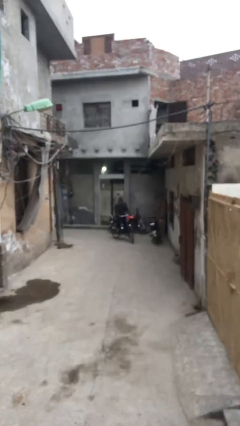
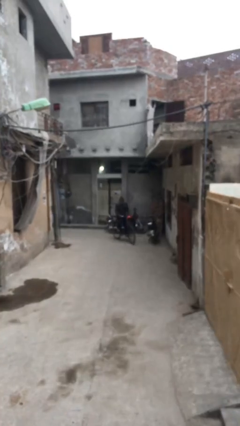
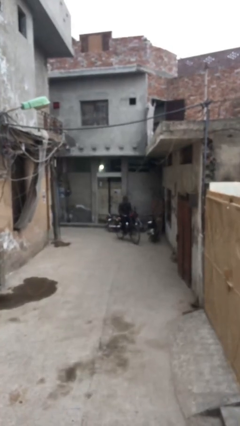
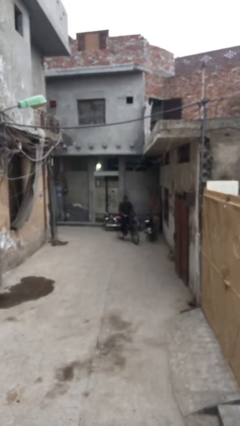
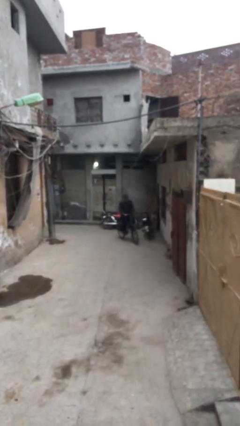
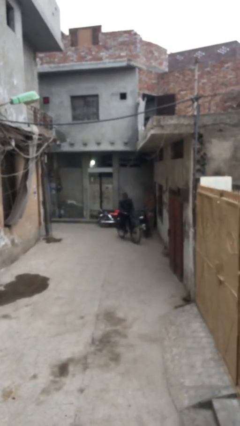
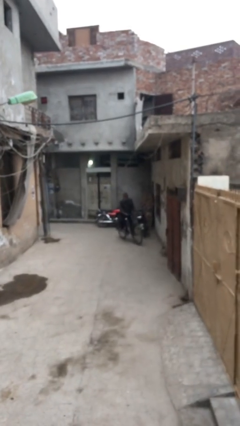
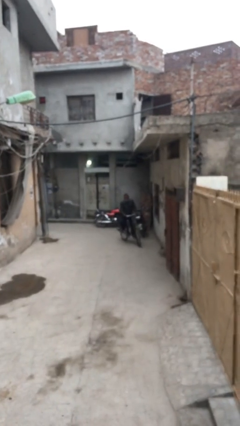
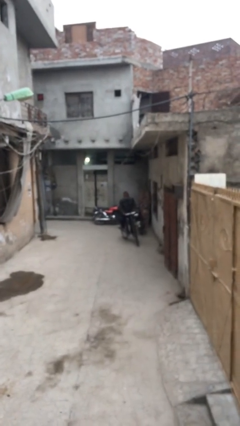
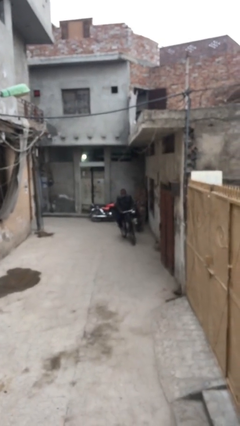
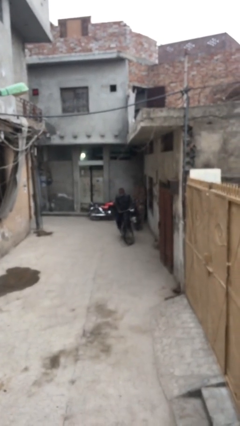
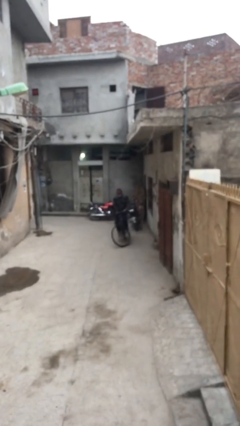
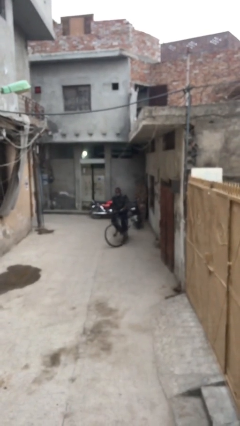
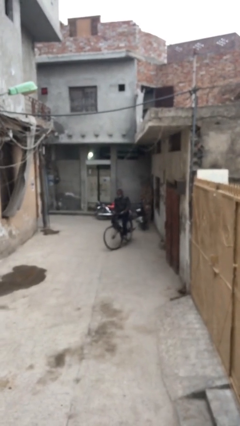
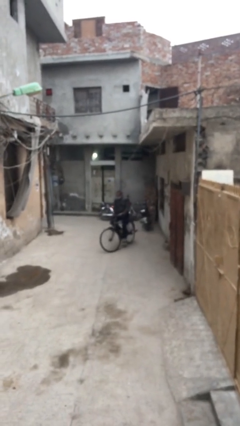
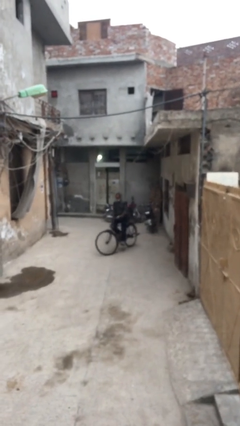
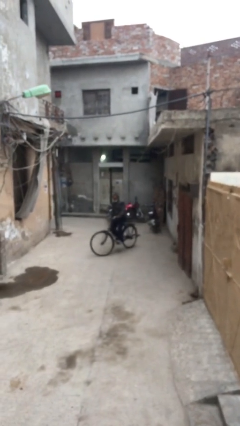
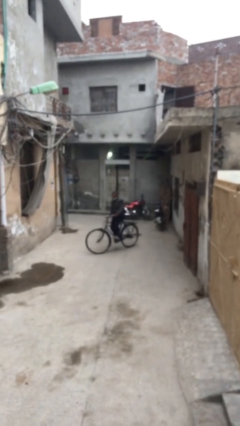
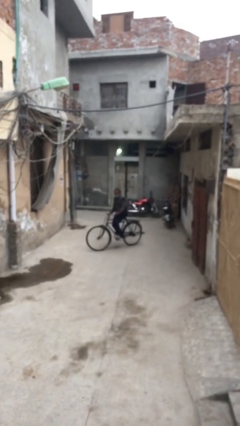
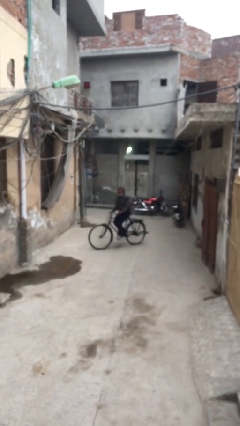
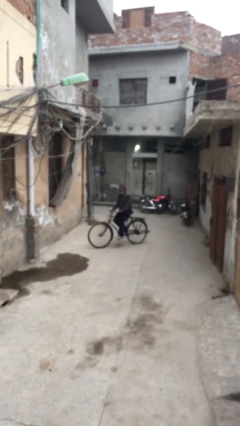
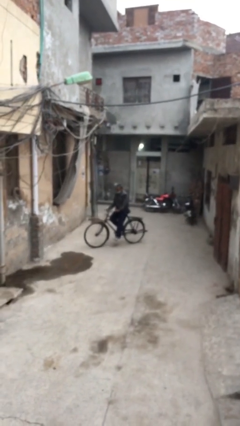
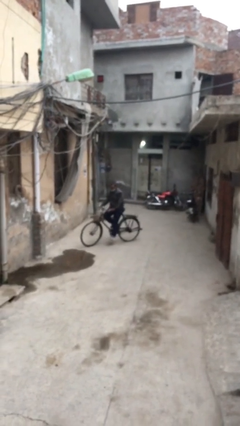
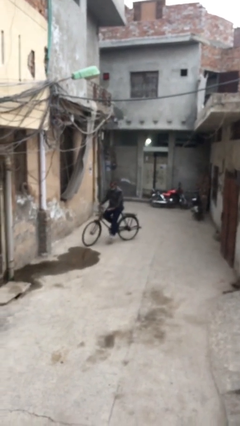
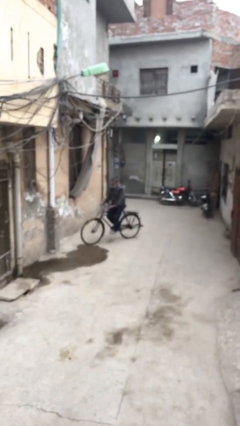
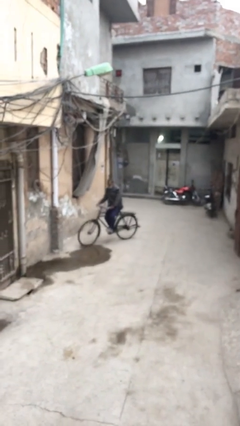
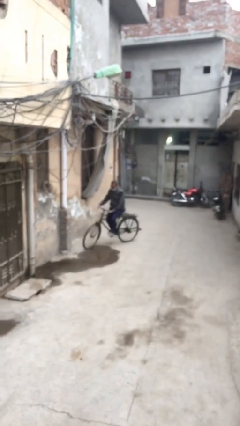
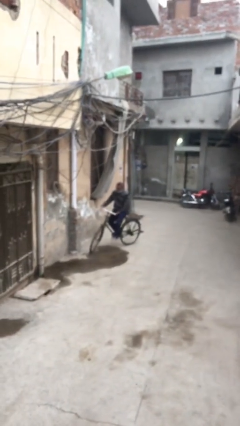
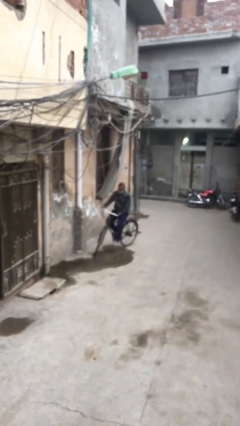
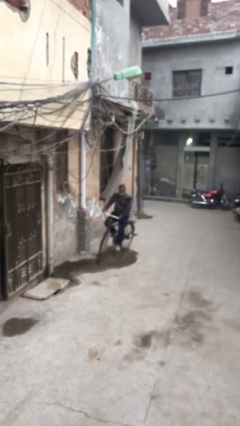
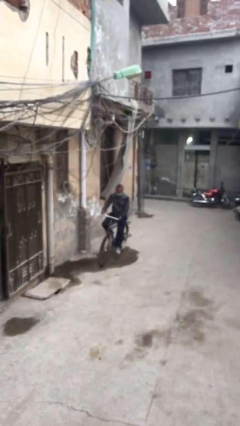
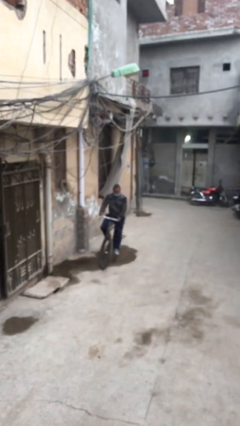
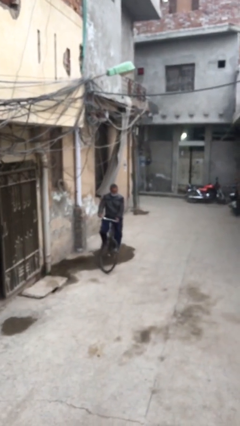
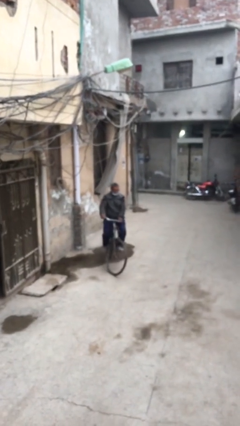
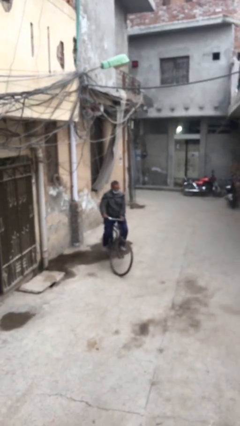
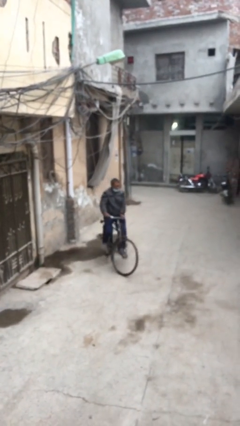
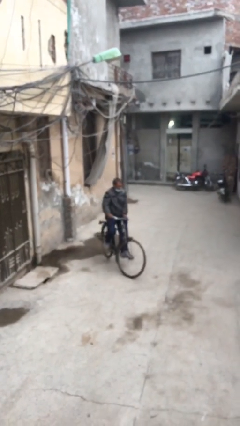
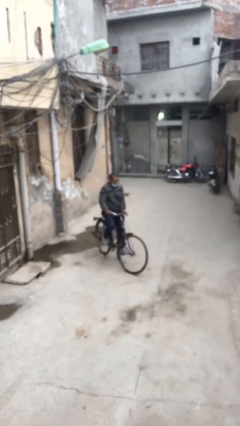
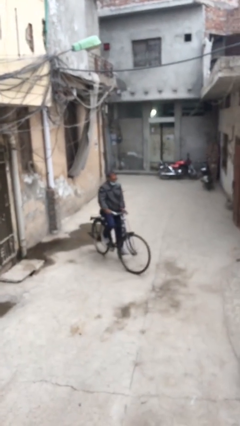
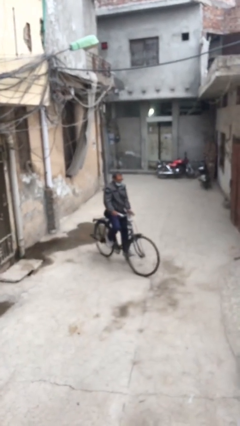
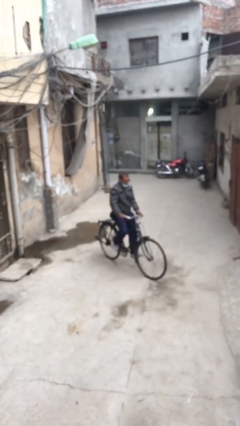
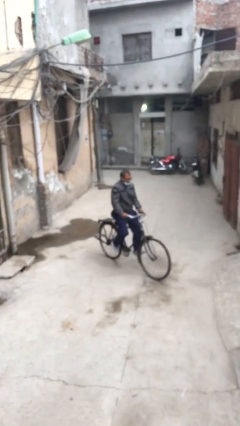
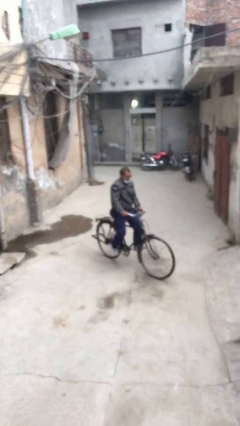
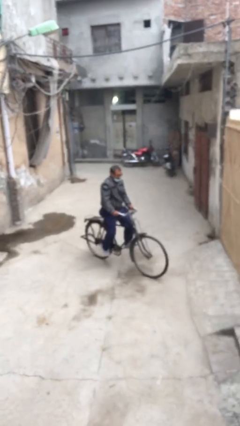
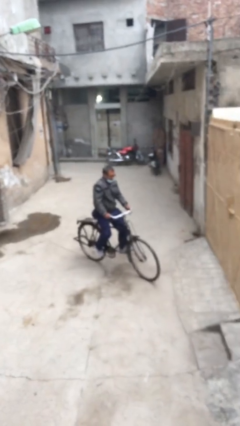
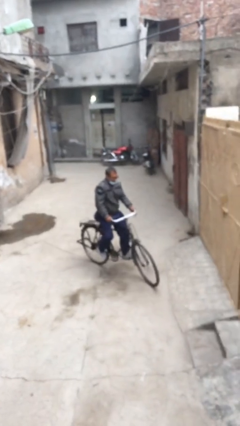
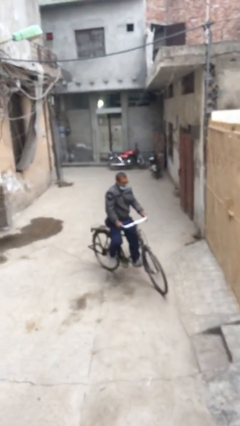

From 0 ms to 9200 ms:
person rides bicycle

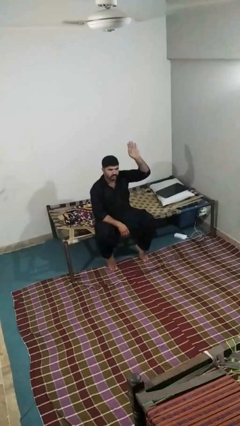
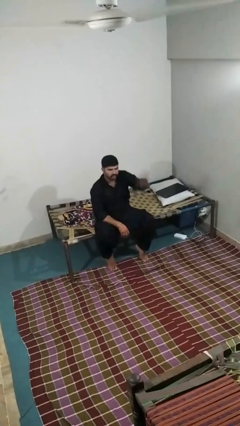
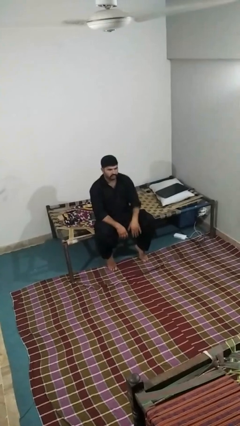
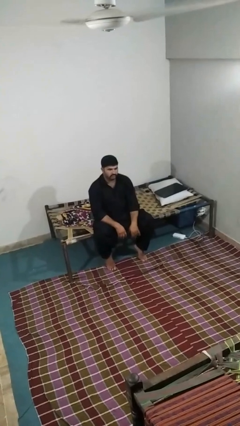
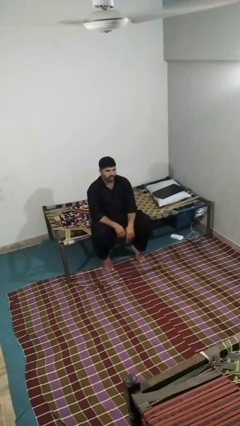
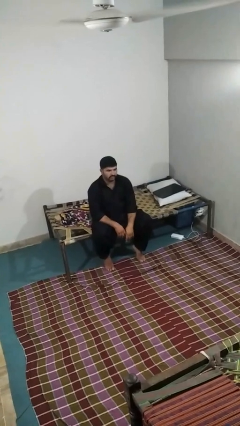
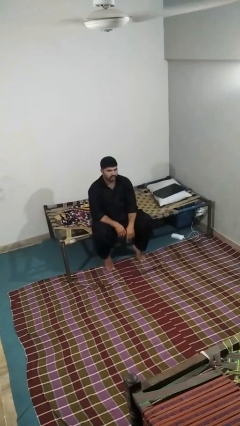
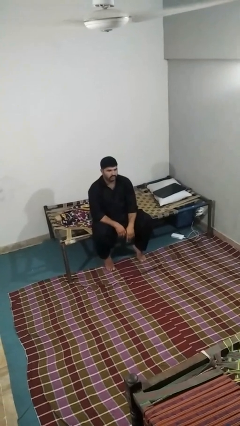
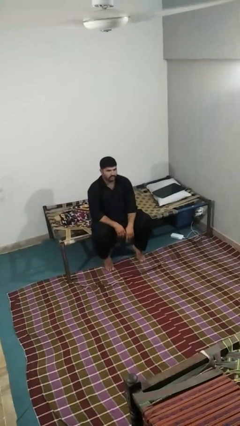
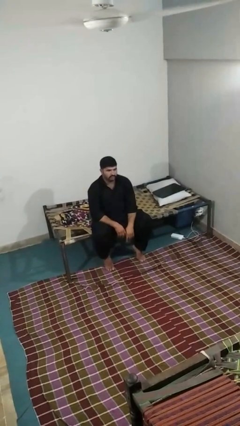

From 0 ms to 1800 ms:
person gestures lower hand

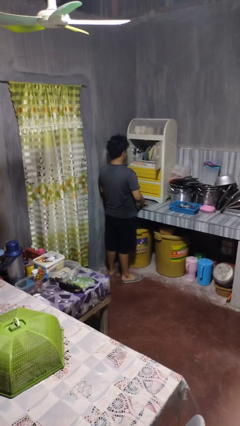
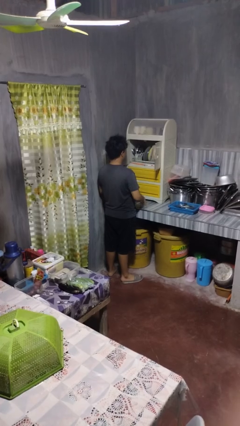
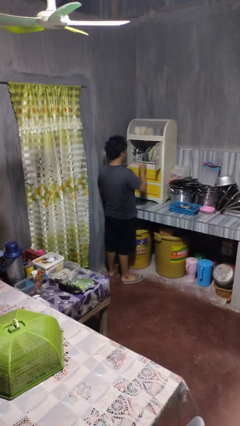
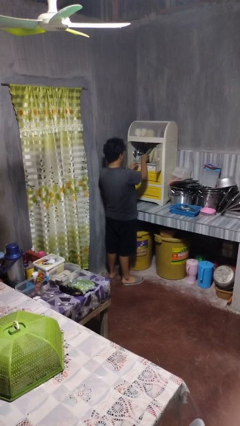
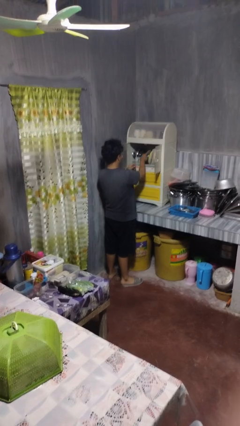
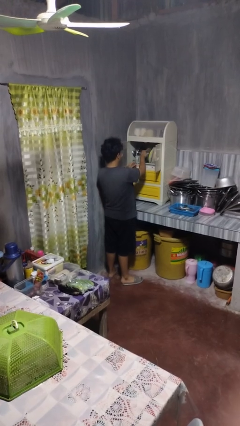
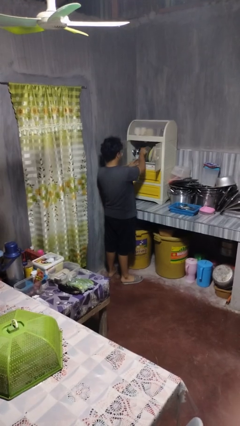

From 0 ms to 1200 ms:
person picks up object from cabinet

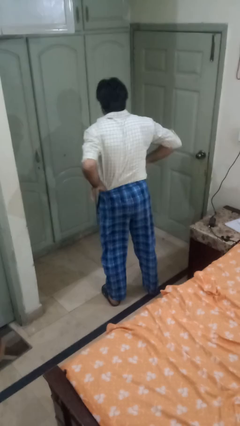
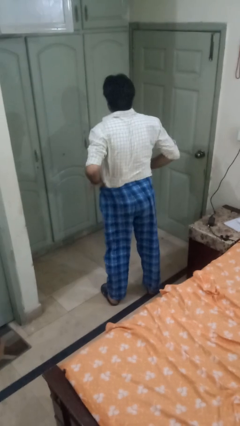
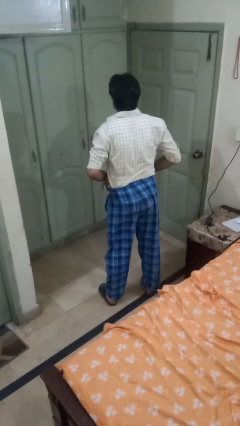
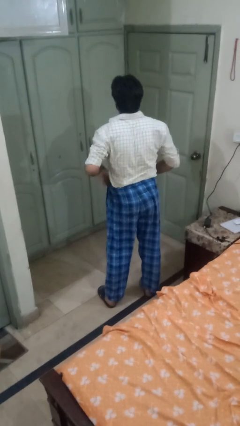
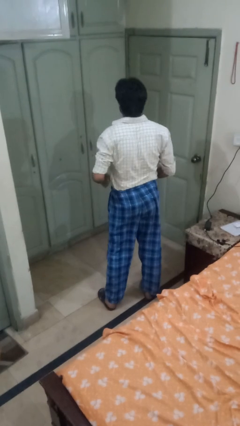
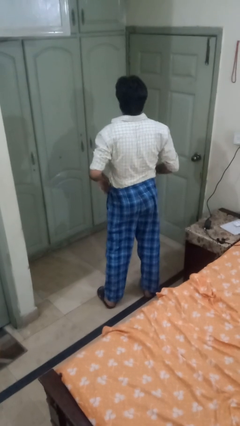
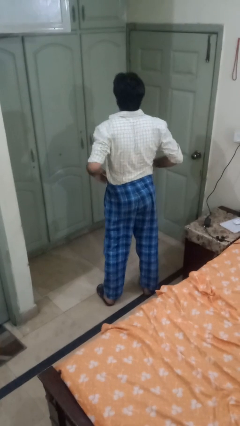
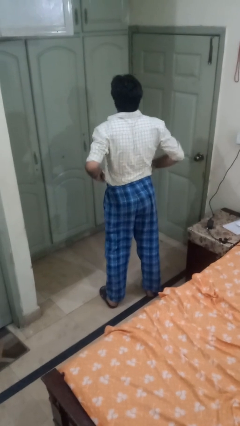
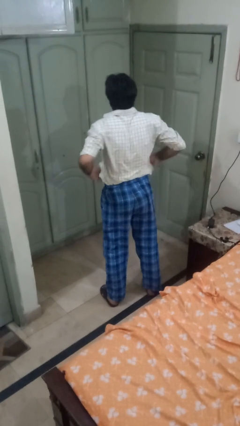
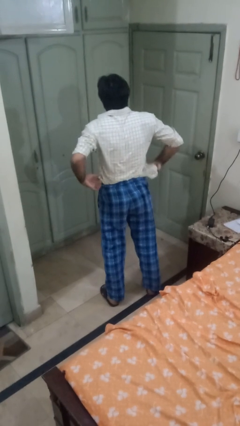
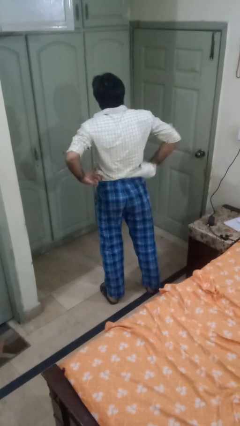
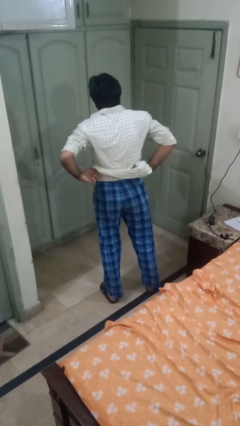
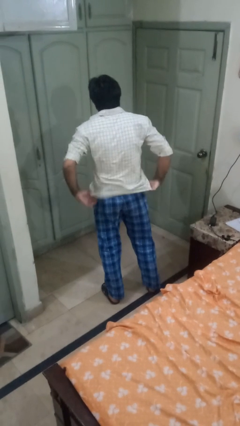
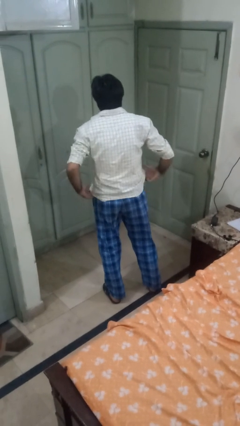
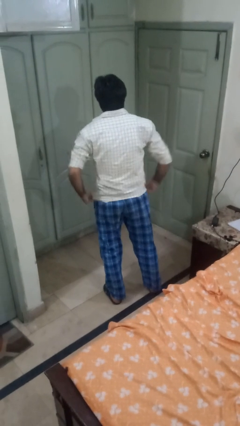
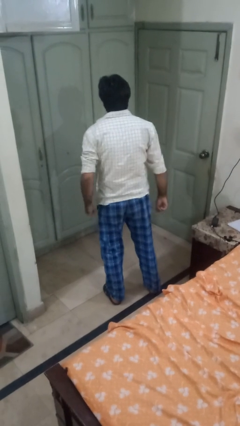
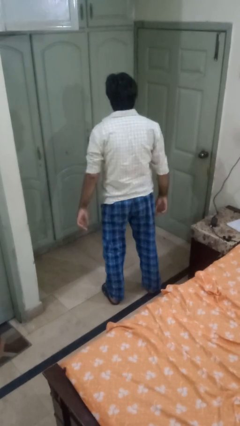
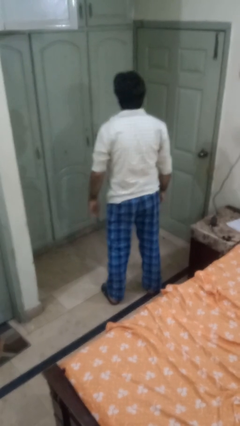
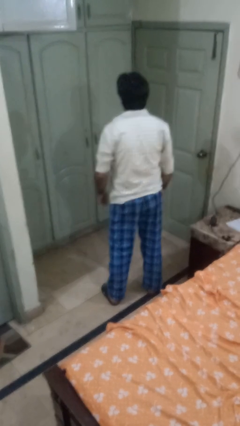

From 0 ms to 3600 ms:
person untucks shirt

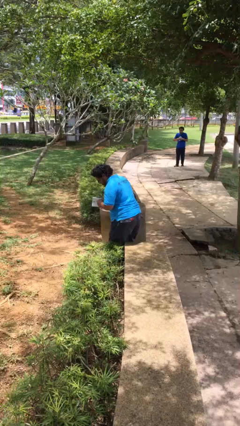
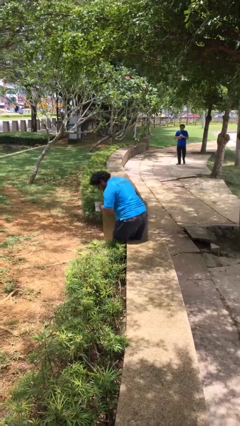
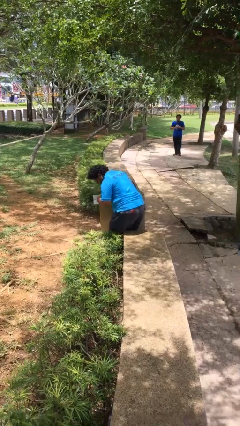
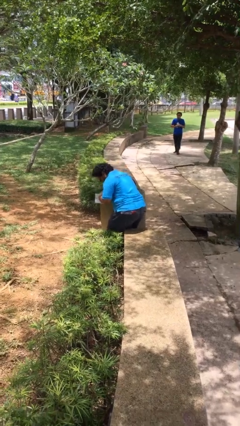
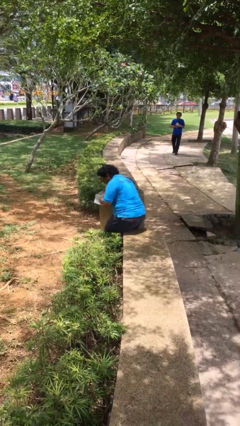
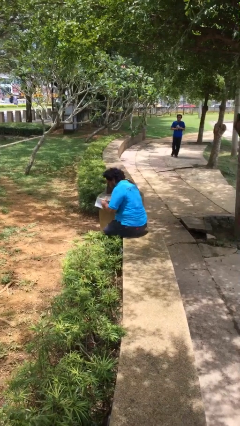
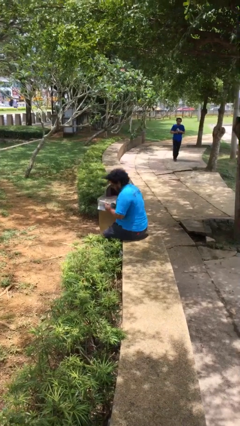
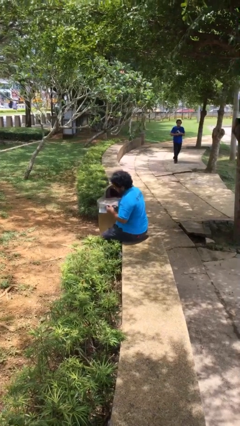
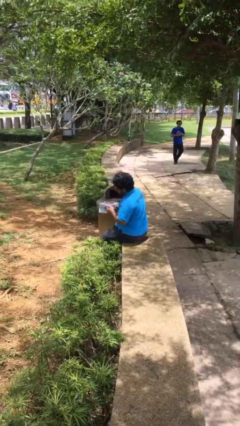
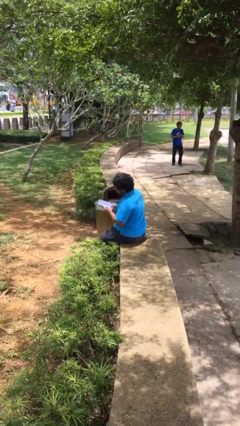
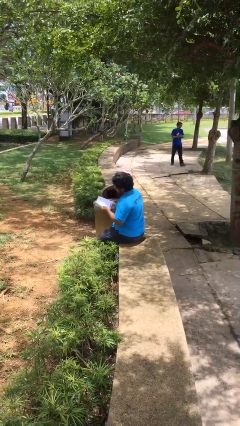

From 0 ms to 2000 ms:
person sits down
